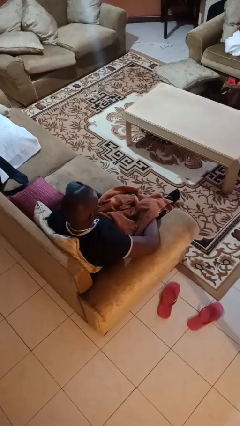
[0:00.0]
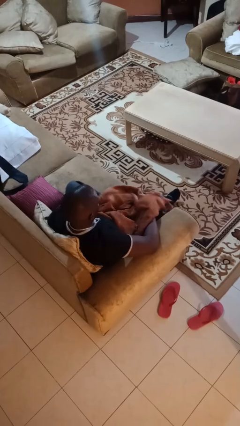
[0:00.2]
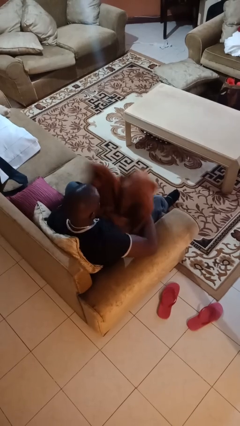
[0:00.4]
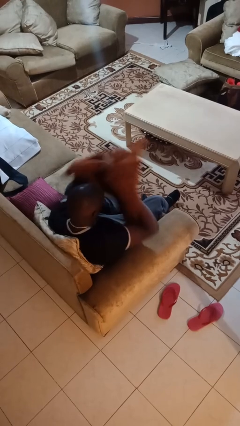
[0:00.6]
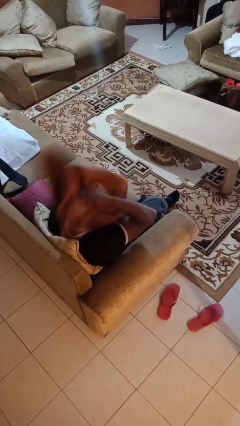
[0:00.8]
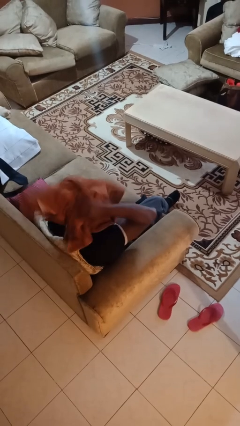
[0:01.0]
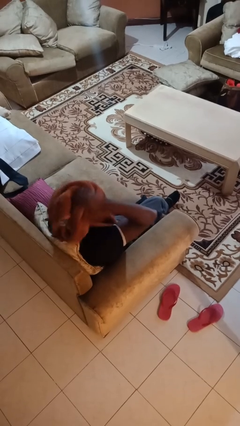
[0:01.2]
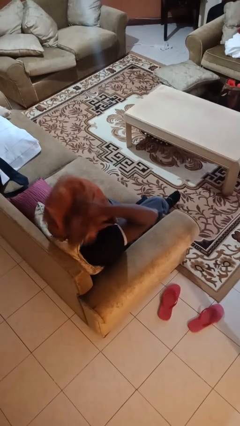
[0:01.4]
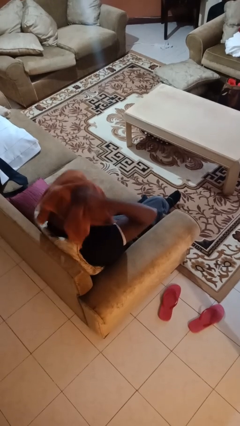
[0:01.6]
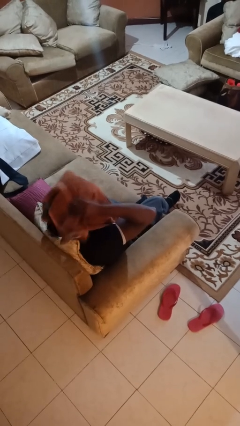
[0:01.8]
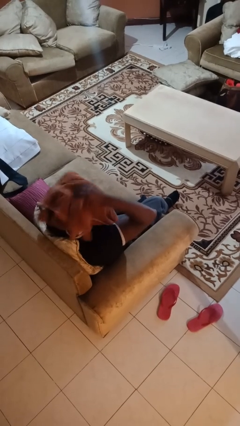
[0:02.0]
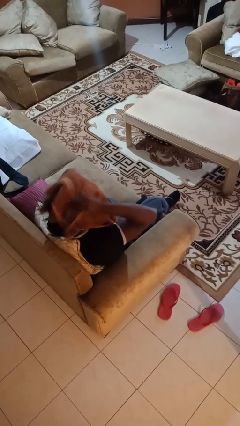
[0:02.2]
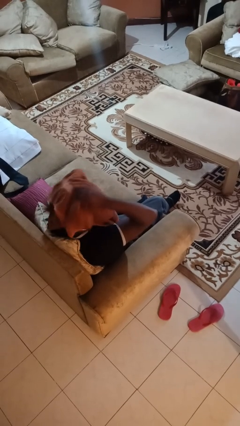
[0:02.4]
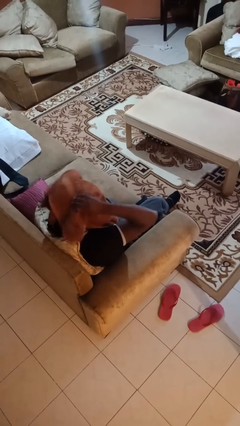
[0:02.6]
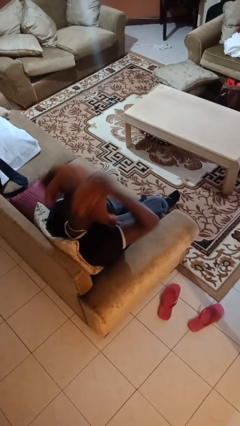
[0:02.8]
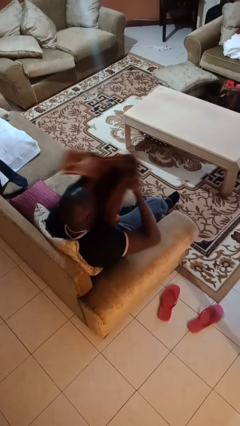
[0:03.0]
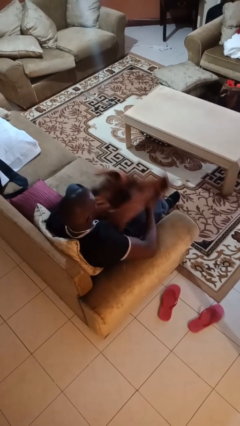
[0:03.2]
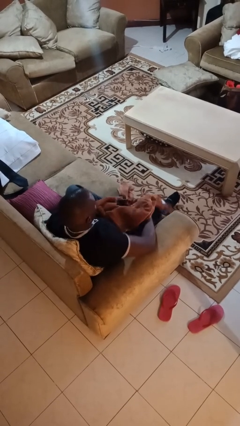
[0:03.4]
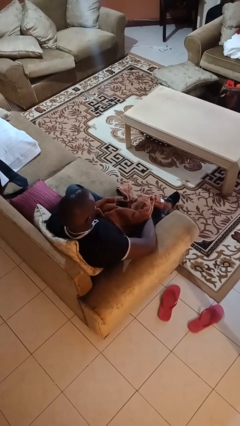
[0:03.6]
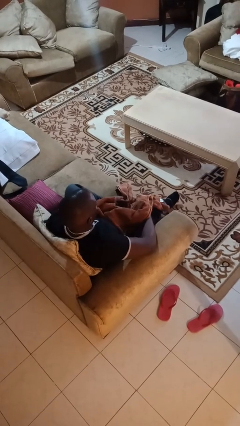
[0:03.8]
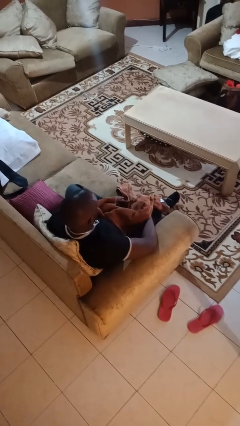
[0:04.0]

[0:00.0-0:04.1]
person dries hair with towel

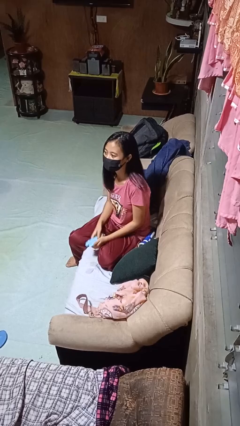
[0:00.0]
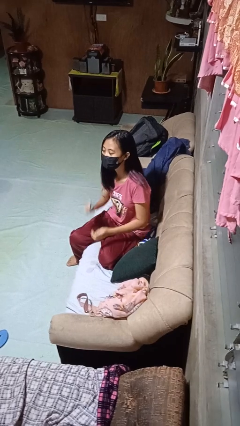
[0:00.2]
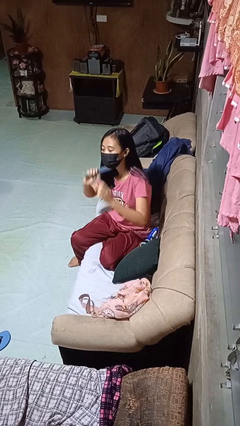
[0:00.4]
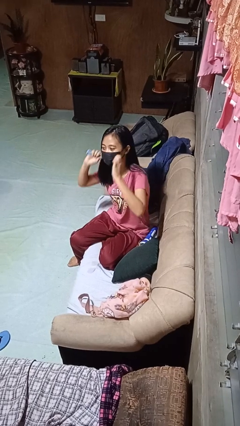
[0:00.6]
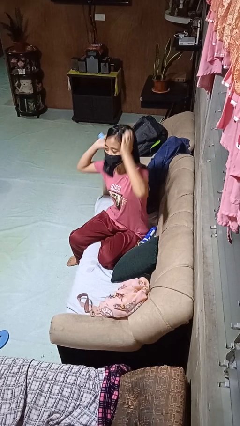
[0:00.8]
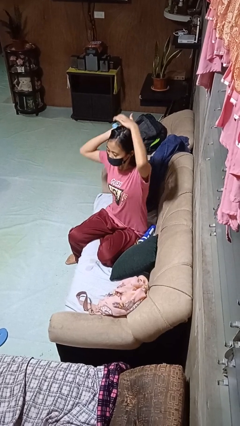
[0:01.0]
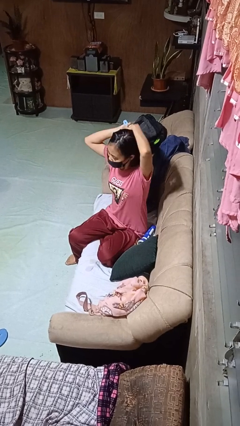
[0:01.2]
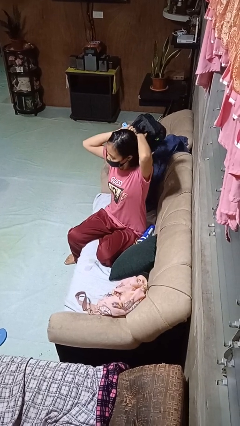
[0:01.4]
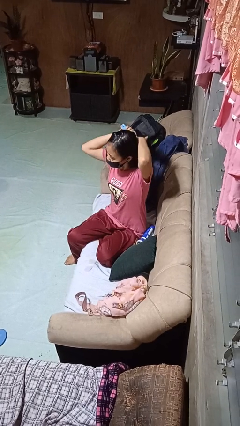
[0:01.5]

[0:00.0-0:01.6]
person brushes hair

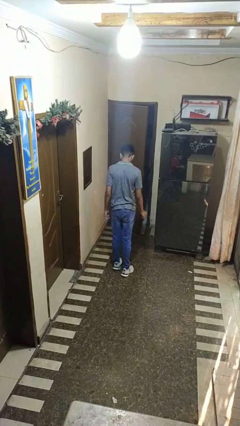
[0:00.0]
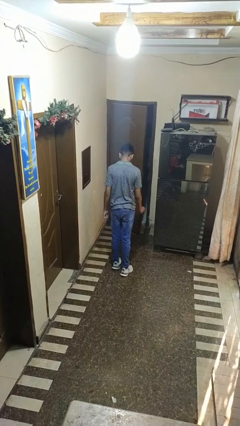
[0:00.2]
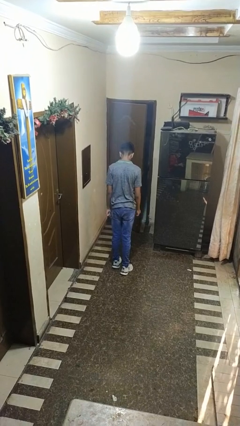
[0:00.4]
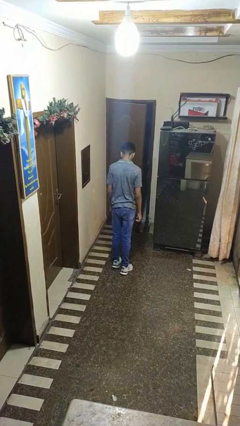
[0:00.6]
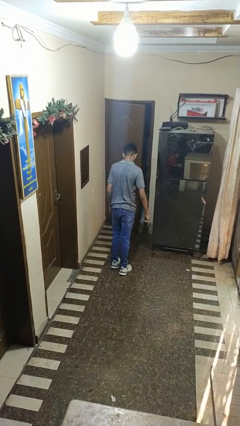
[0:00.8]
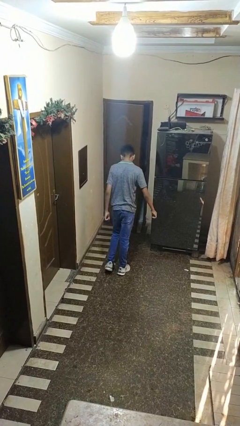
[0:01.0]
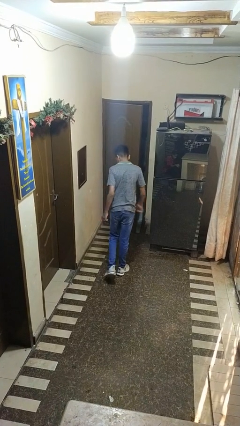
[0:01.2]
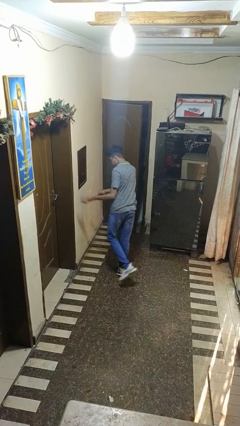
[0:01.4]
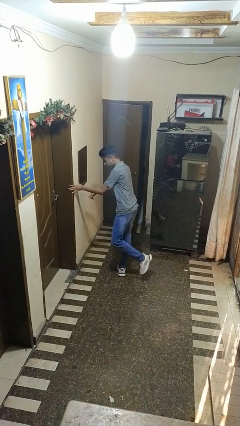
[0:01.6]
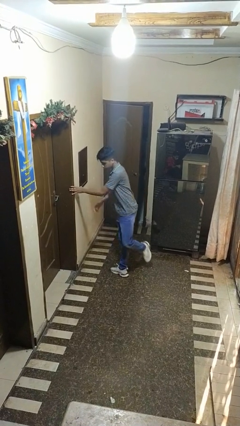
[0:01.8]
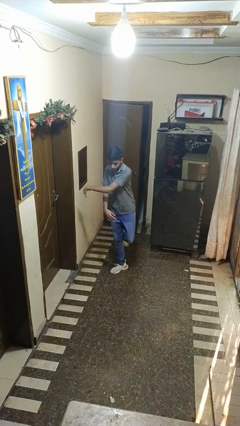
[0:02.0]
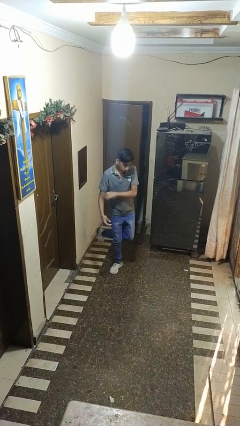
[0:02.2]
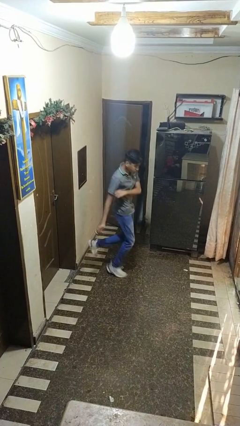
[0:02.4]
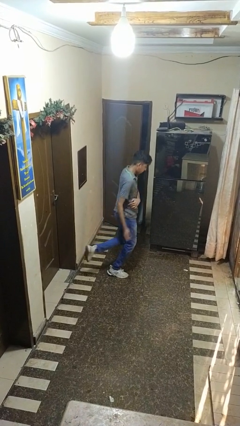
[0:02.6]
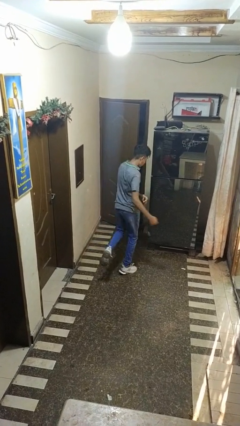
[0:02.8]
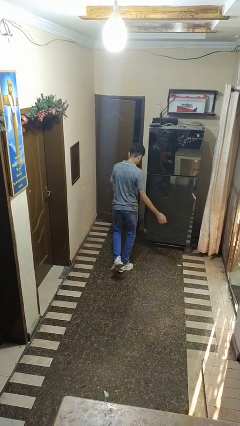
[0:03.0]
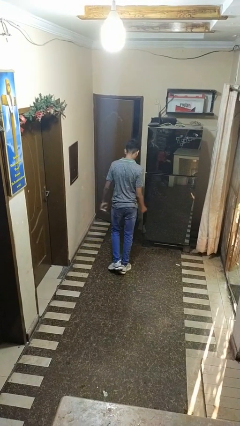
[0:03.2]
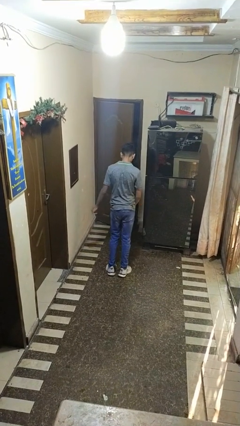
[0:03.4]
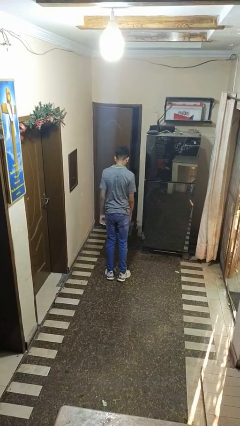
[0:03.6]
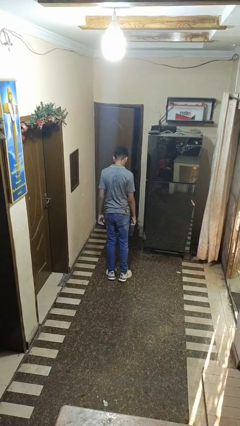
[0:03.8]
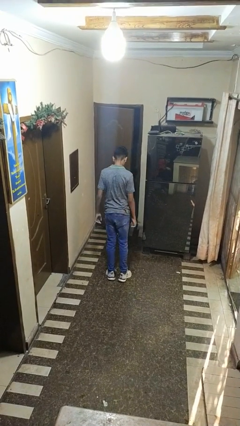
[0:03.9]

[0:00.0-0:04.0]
person twirls

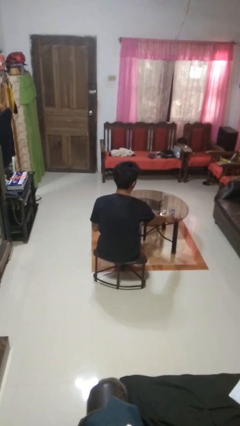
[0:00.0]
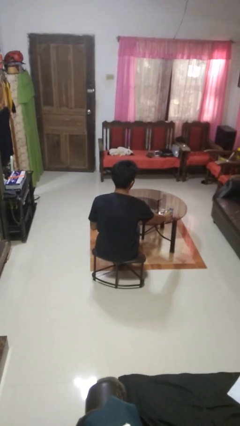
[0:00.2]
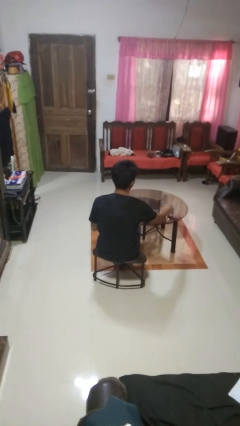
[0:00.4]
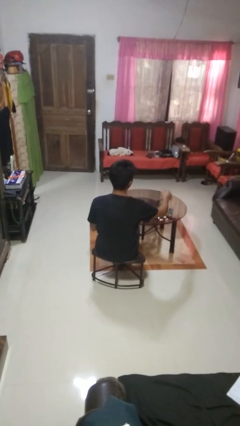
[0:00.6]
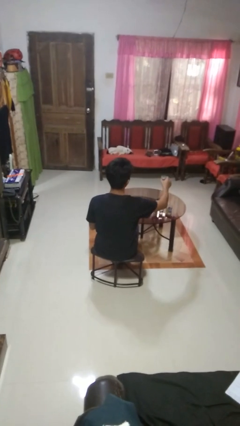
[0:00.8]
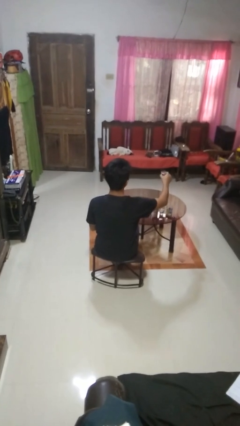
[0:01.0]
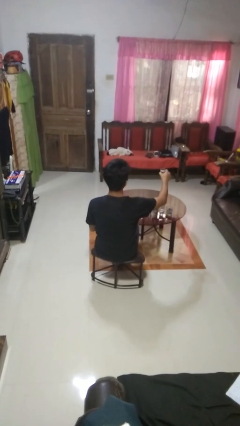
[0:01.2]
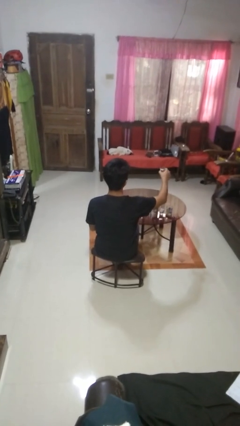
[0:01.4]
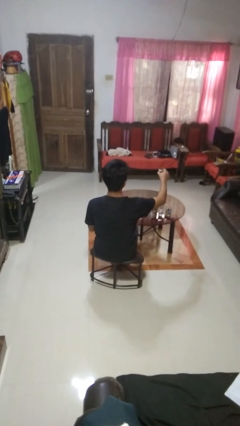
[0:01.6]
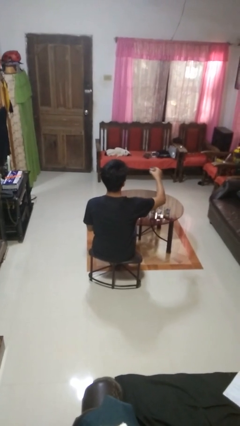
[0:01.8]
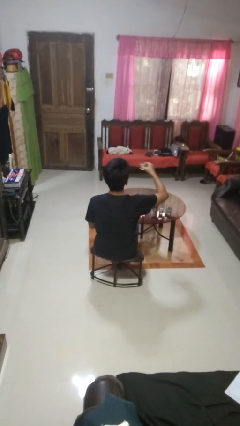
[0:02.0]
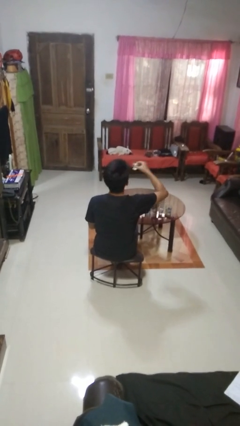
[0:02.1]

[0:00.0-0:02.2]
person picks up object from table

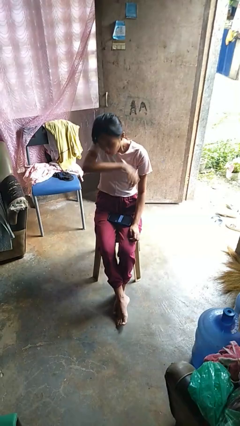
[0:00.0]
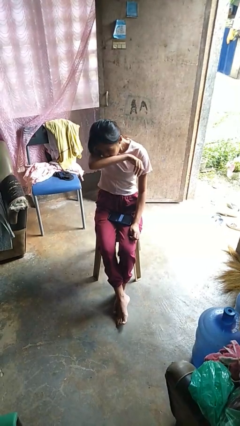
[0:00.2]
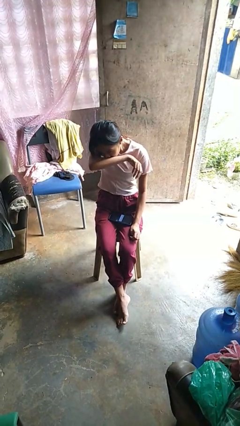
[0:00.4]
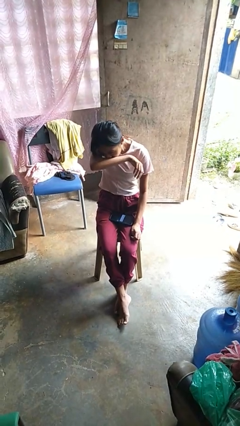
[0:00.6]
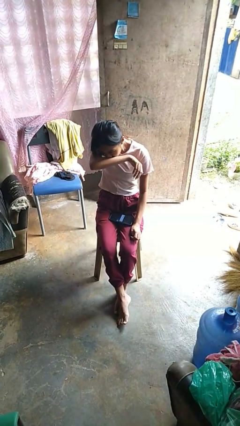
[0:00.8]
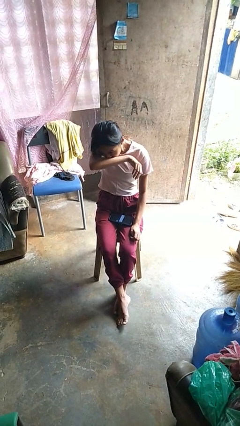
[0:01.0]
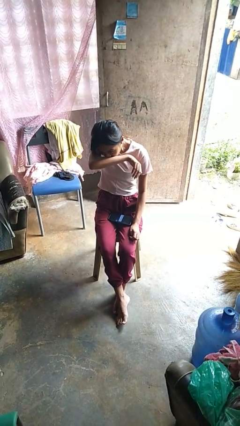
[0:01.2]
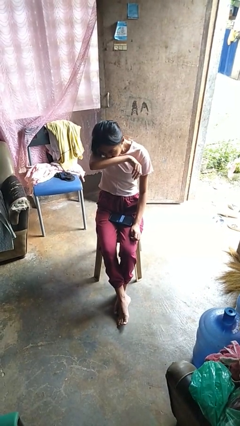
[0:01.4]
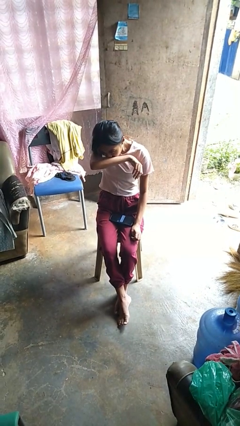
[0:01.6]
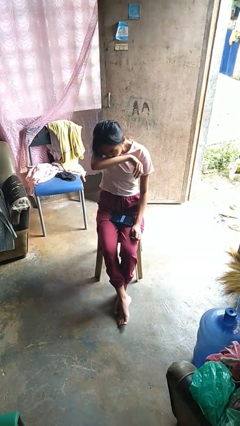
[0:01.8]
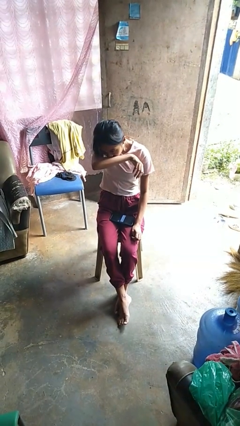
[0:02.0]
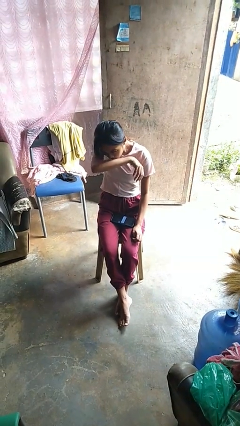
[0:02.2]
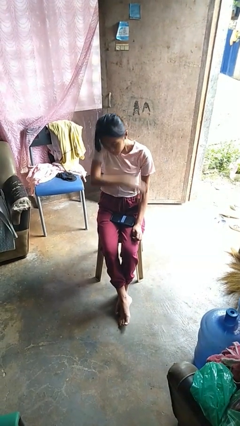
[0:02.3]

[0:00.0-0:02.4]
person sneezes into arm

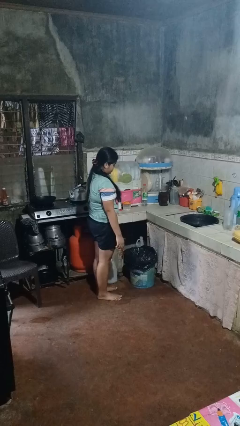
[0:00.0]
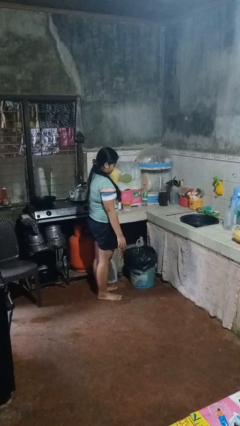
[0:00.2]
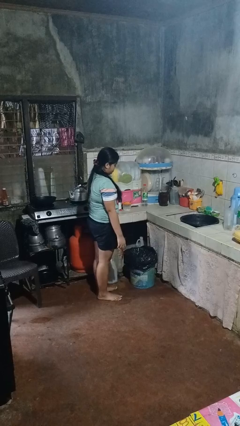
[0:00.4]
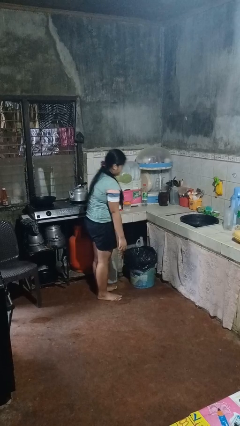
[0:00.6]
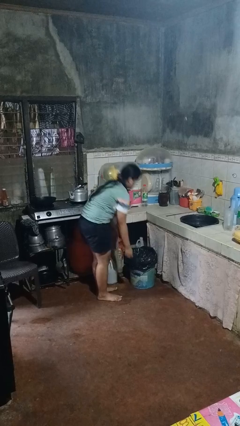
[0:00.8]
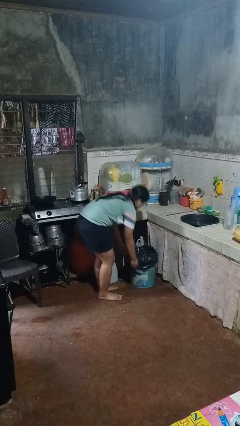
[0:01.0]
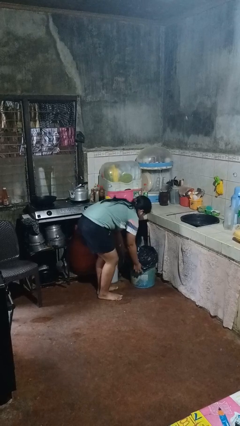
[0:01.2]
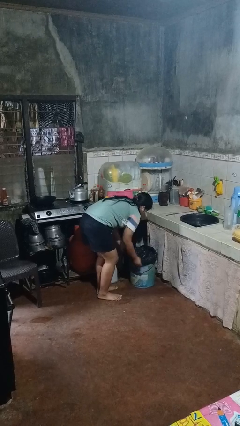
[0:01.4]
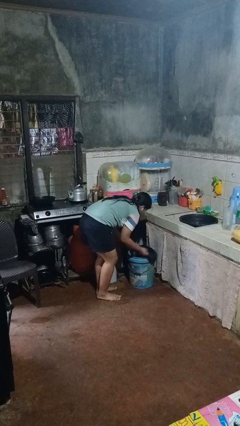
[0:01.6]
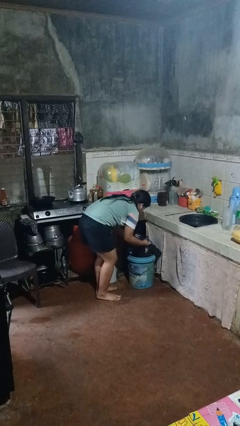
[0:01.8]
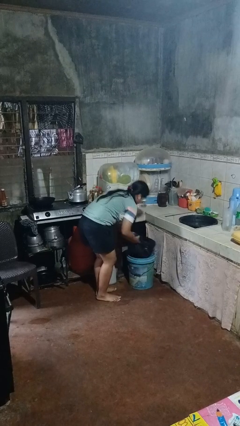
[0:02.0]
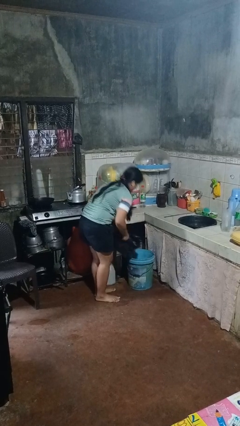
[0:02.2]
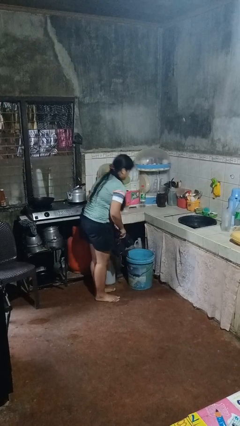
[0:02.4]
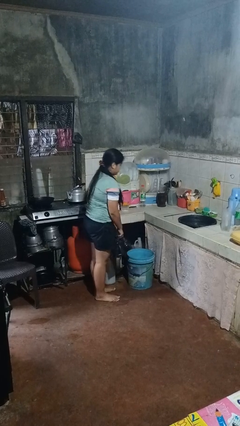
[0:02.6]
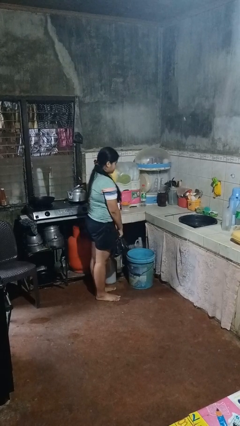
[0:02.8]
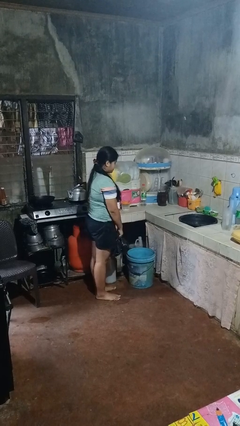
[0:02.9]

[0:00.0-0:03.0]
person removes trashbag from trashcan
